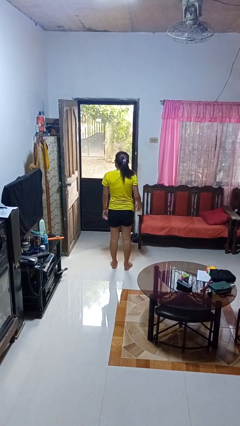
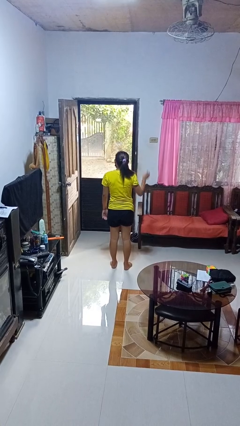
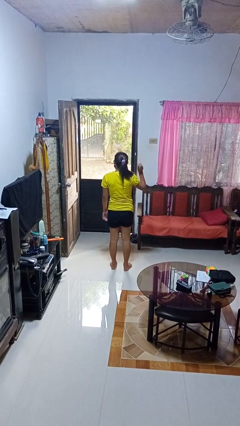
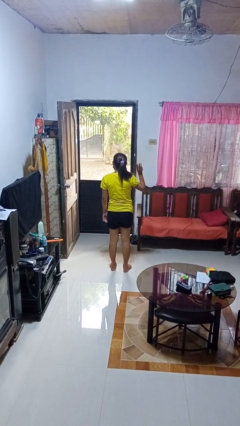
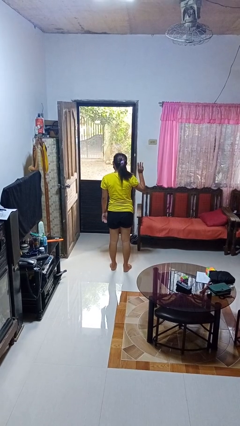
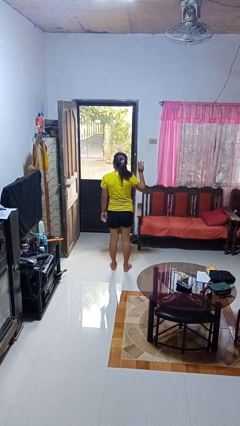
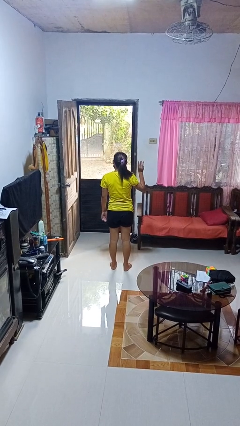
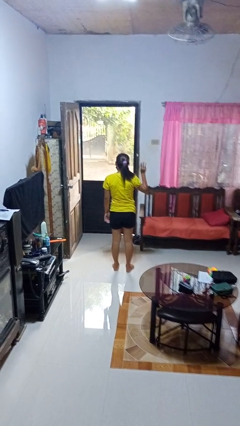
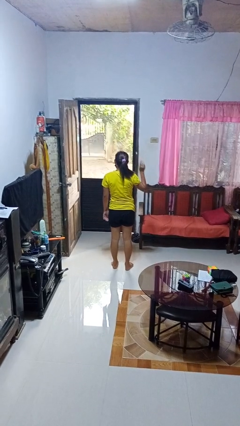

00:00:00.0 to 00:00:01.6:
person gestures number three

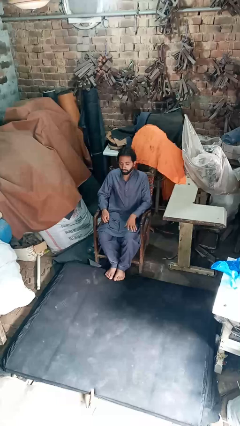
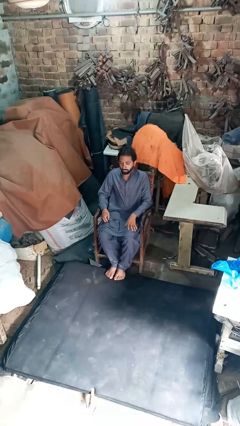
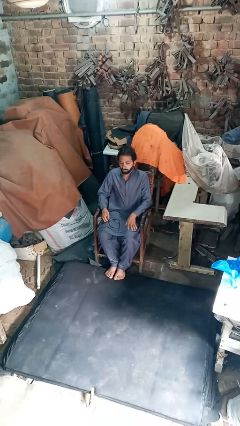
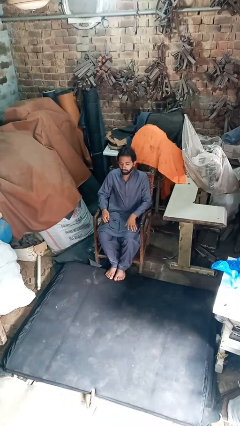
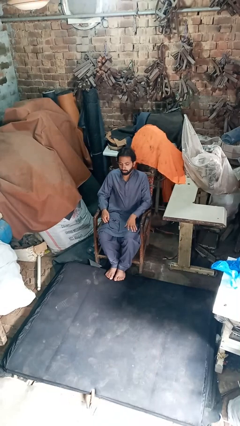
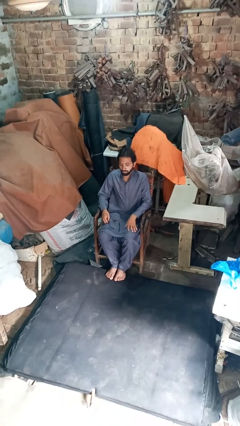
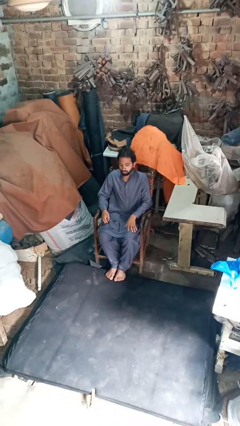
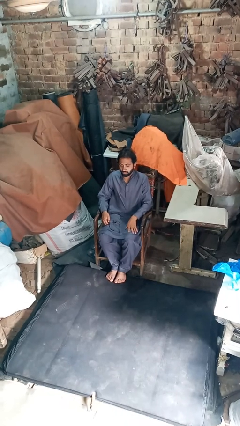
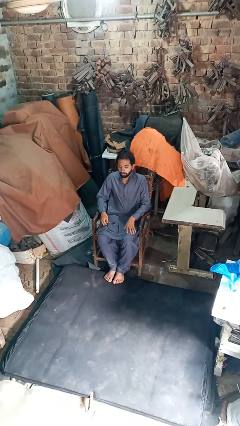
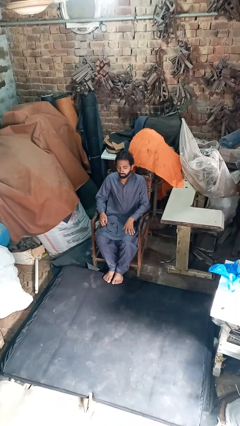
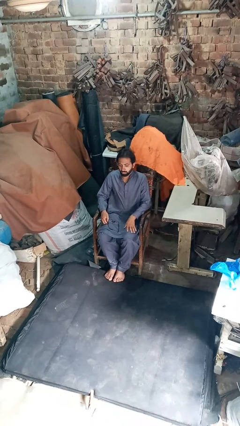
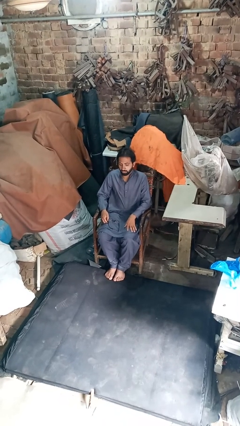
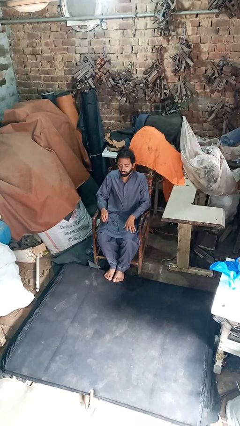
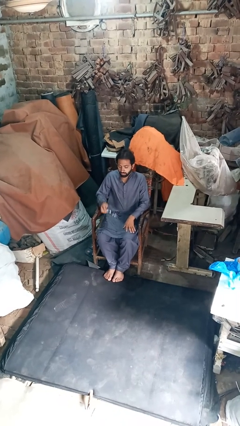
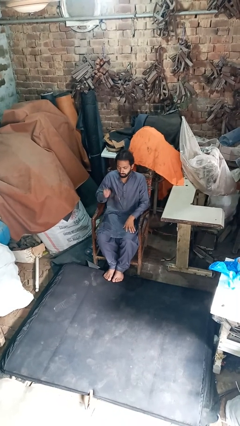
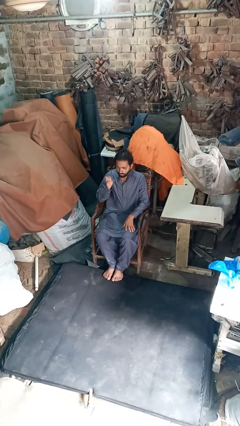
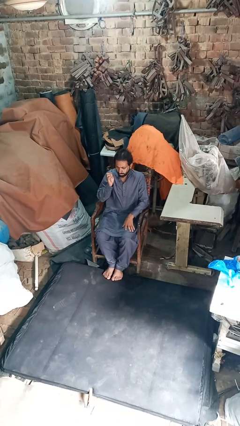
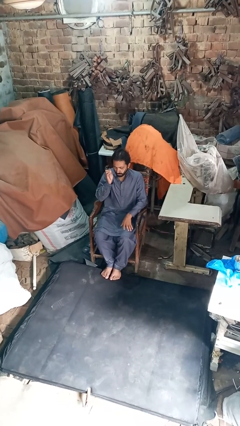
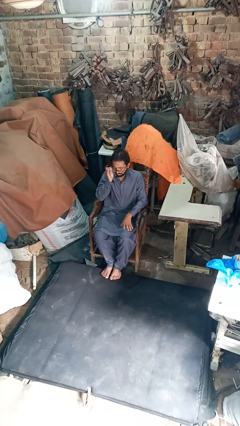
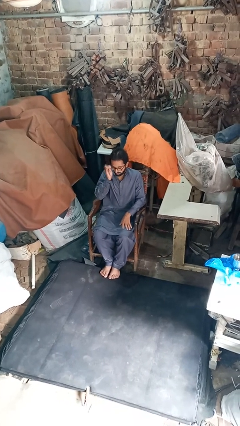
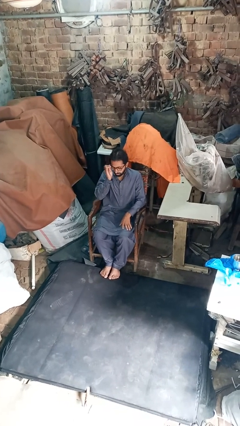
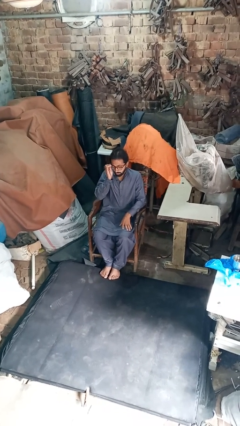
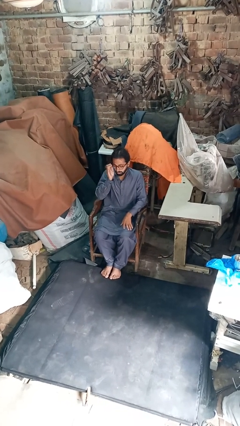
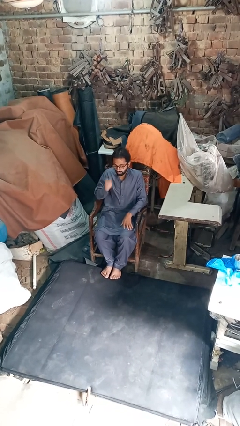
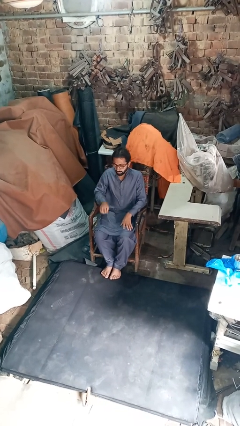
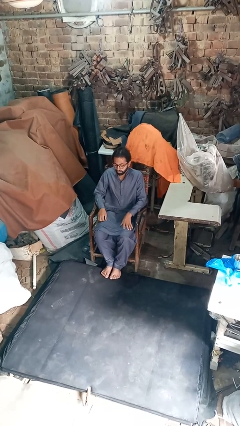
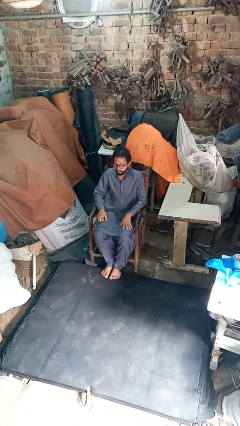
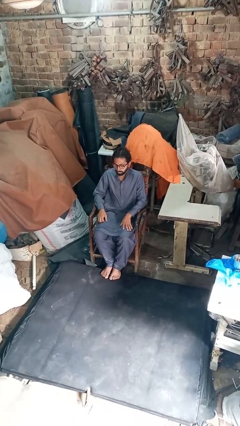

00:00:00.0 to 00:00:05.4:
person puts on glasses

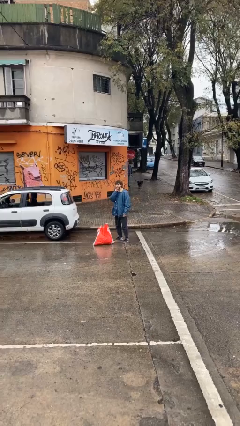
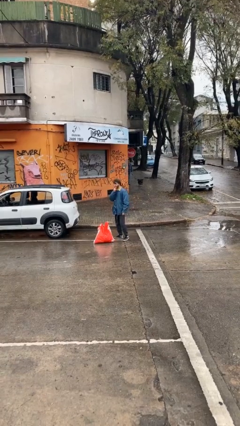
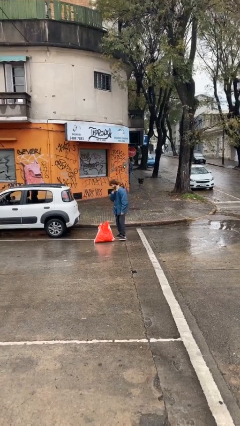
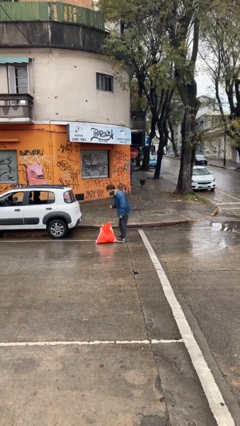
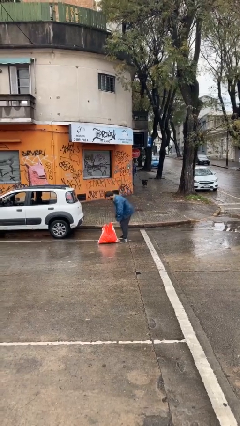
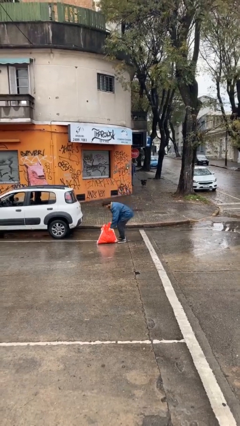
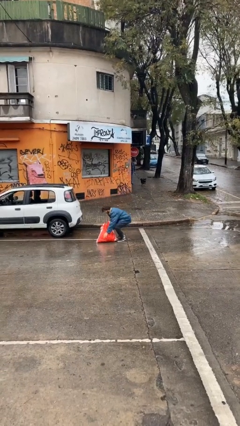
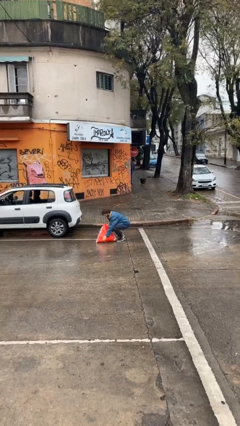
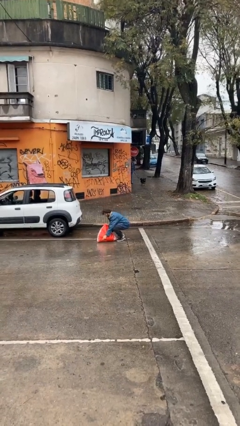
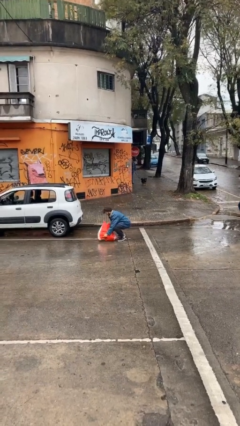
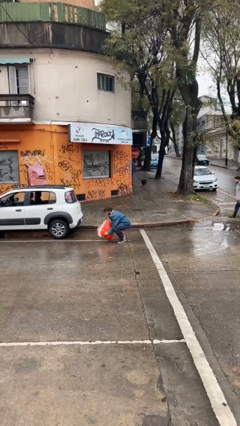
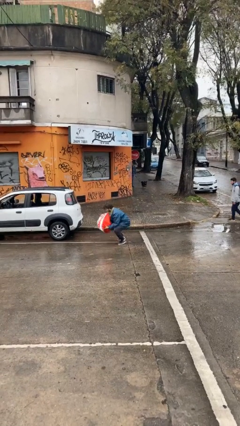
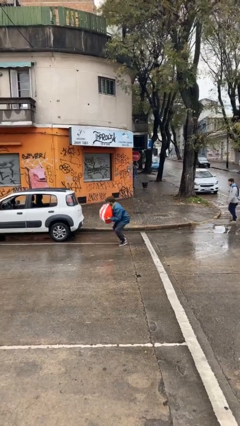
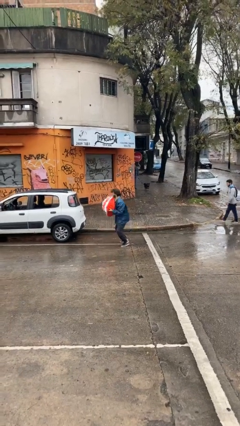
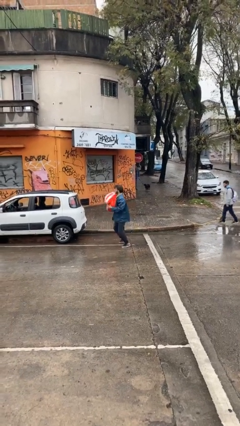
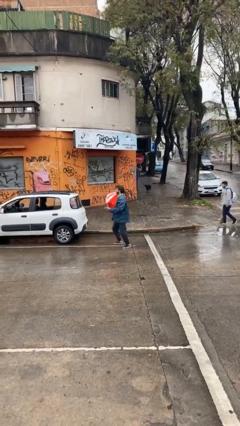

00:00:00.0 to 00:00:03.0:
person picks up object from floor

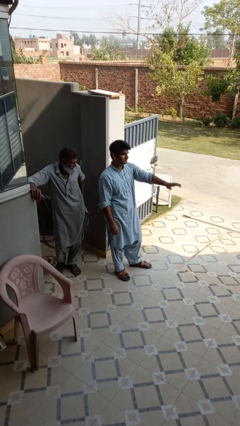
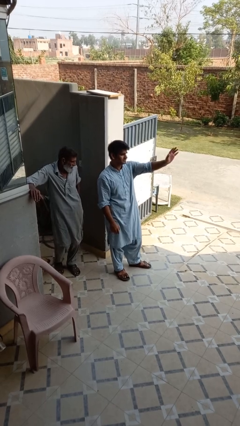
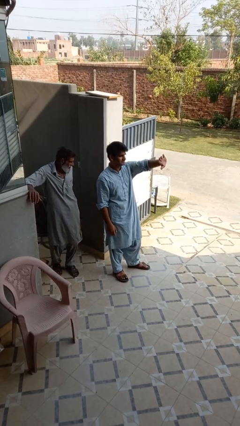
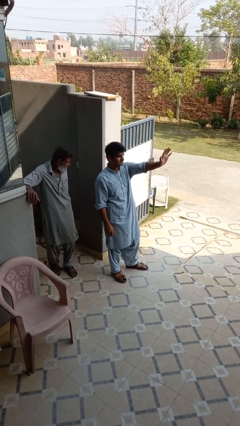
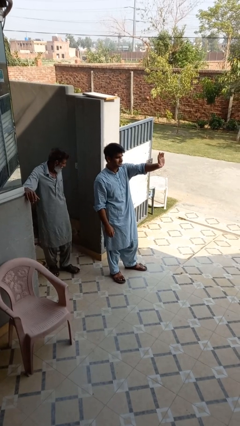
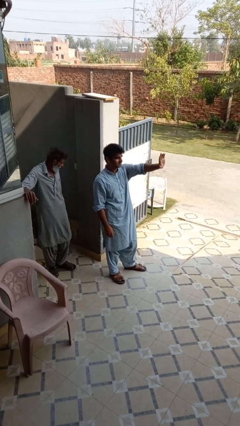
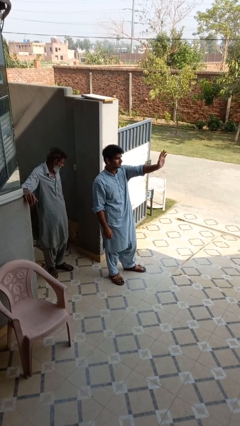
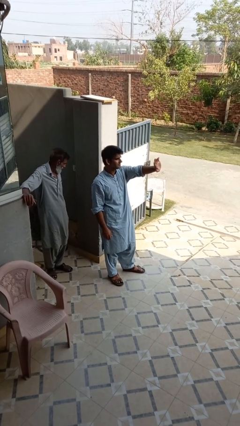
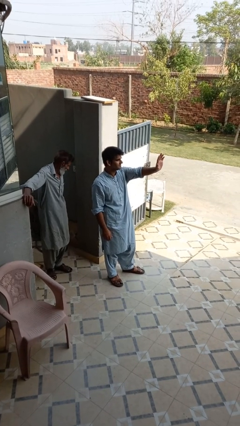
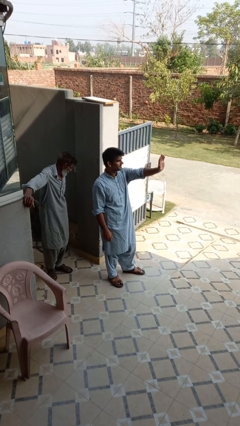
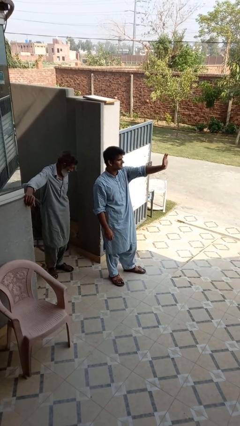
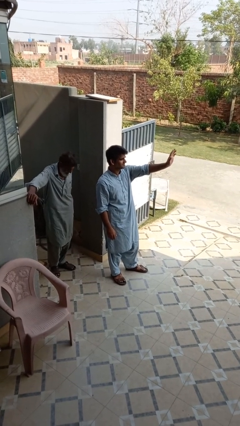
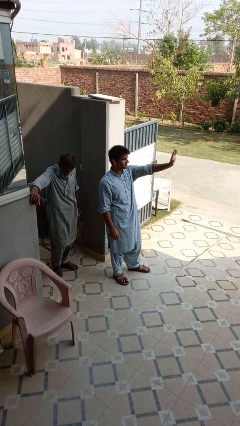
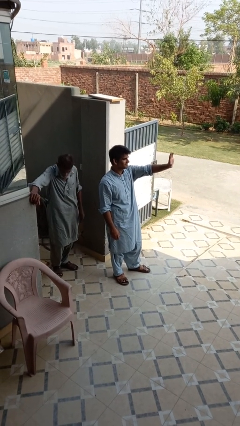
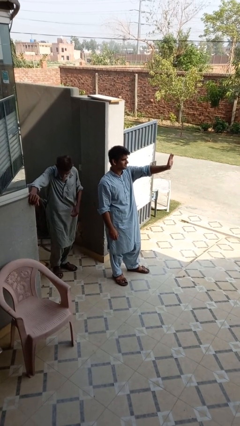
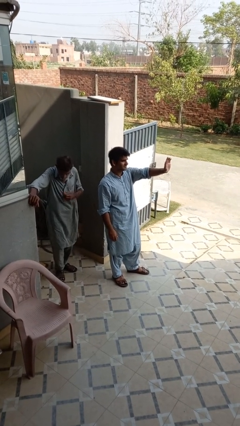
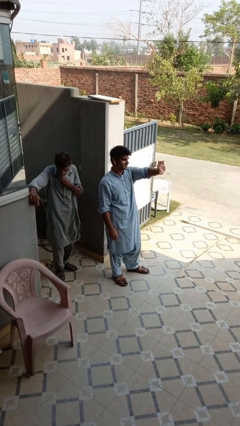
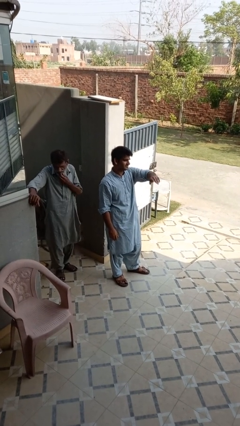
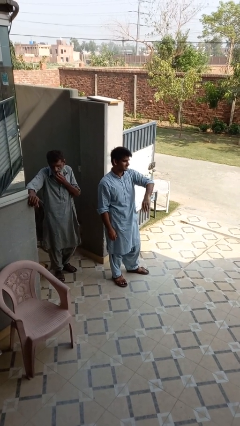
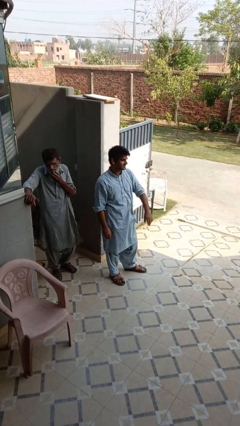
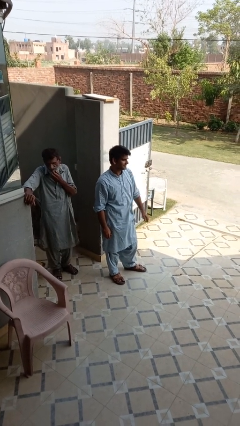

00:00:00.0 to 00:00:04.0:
person waves at person

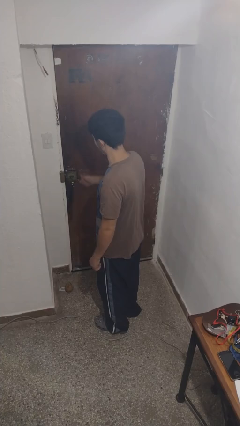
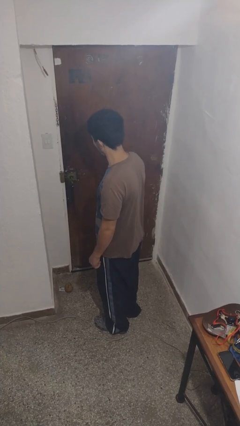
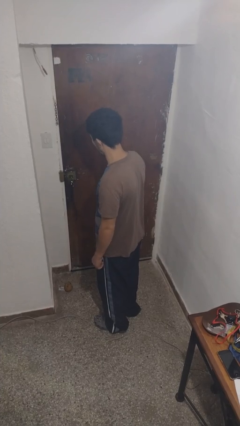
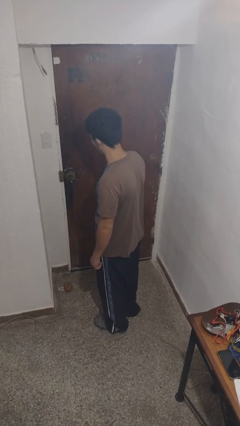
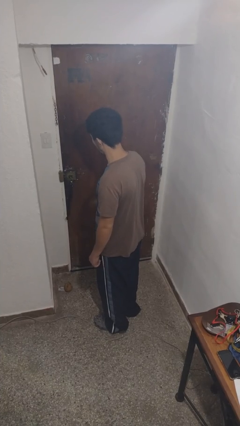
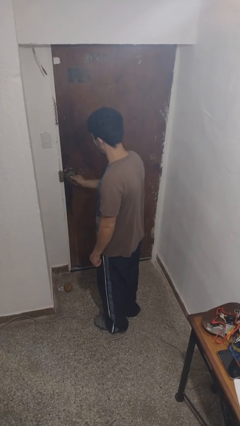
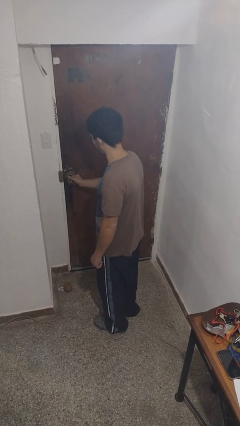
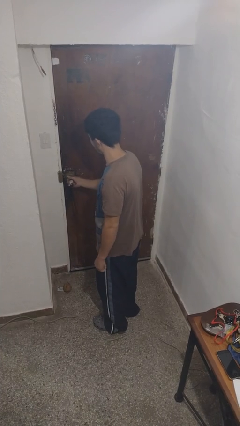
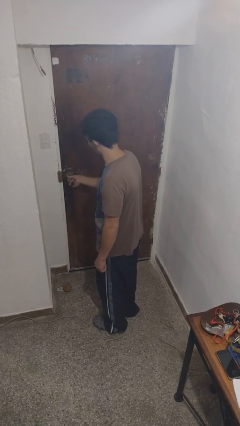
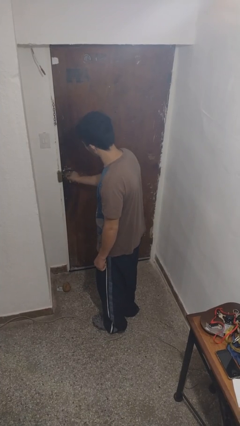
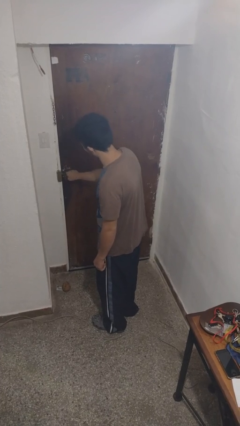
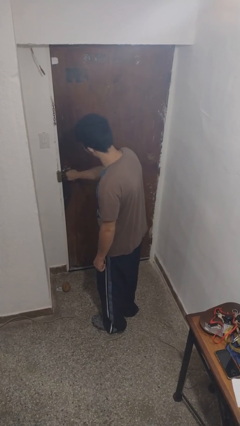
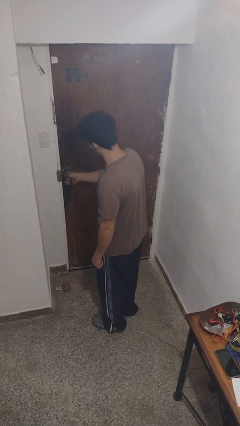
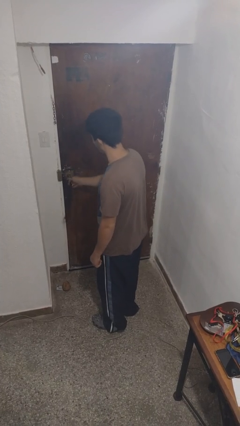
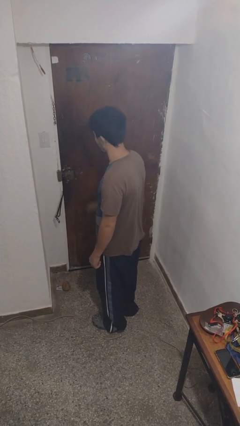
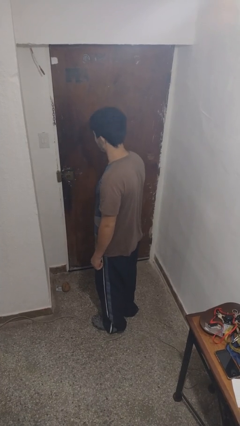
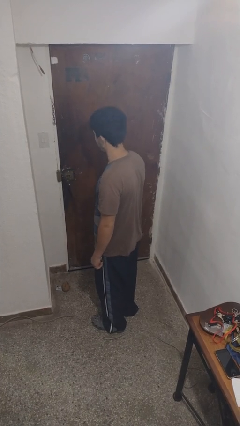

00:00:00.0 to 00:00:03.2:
person locks door with keys

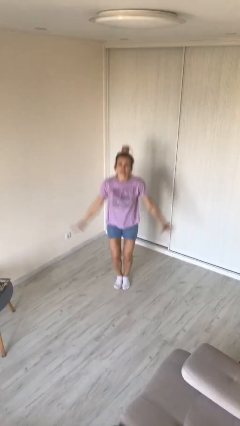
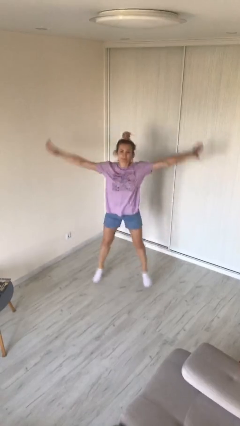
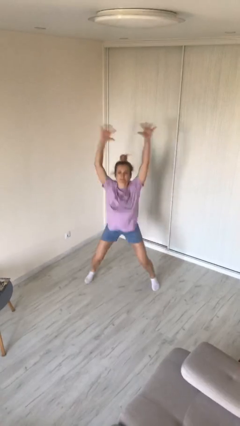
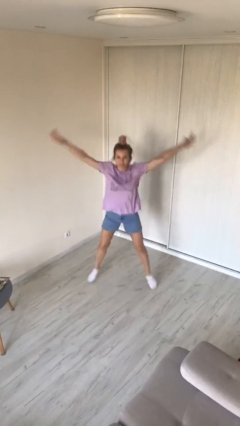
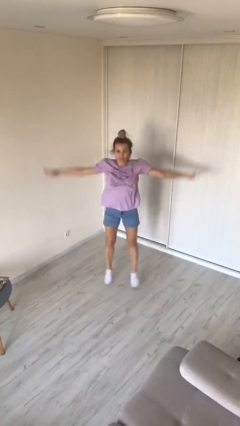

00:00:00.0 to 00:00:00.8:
person exercises with jumping jacks
